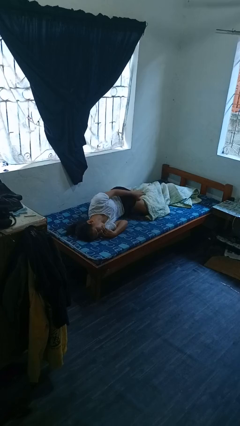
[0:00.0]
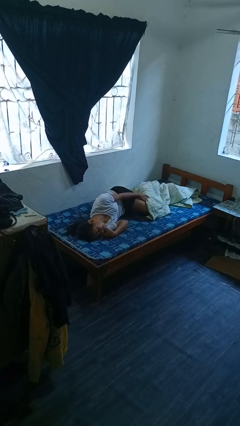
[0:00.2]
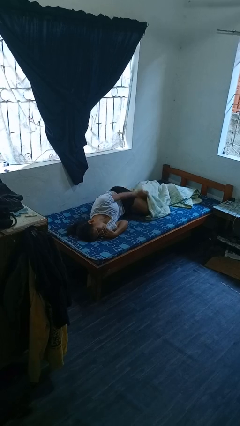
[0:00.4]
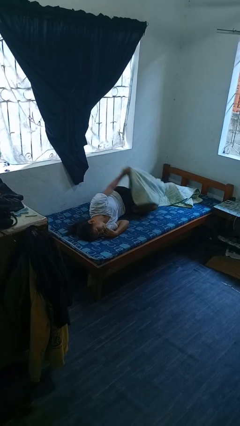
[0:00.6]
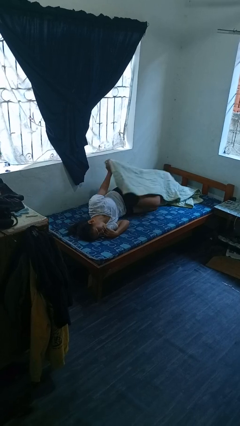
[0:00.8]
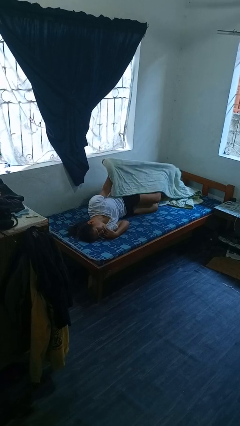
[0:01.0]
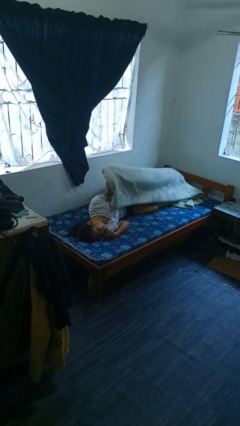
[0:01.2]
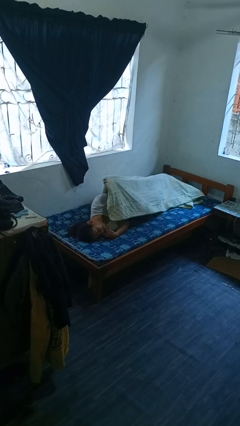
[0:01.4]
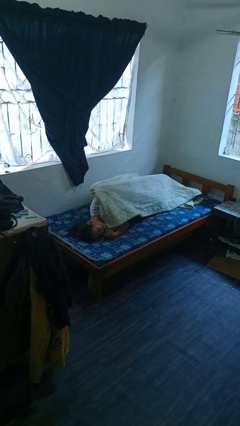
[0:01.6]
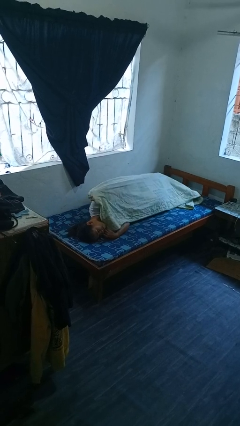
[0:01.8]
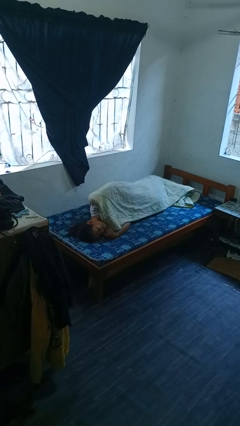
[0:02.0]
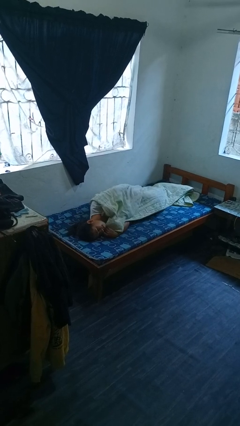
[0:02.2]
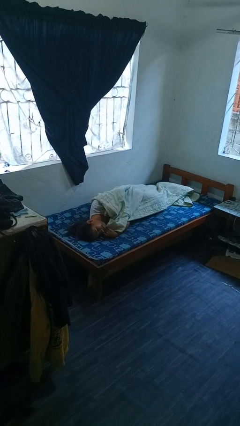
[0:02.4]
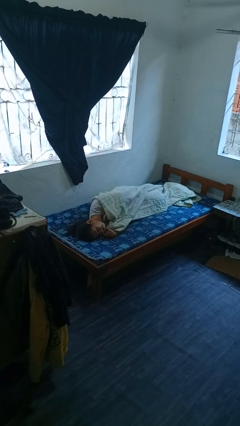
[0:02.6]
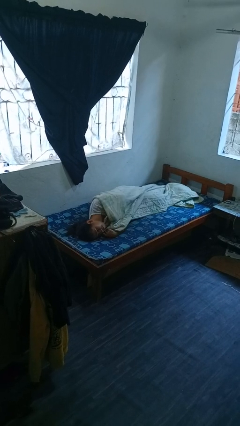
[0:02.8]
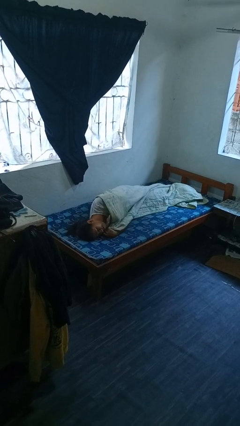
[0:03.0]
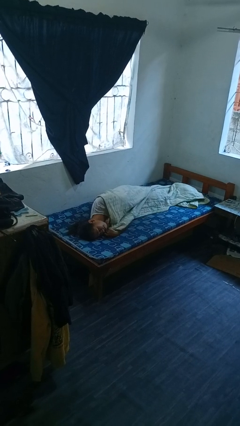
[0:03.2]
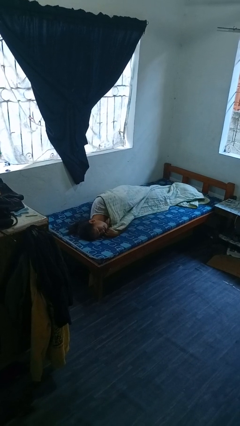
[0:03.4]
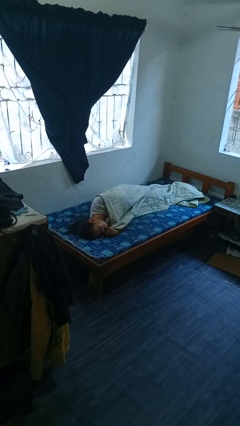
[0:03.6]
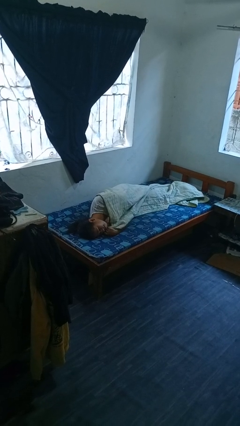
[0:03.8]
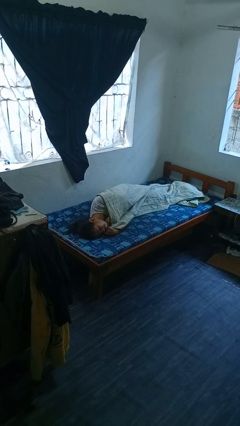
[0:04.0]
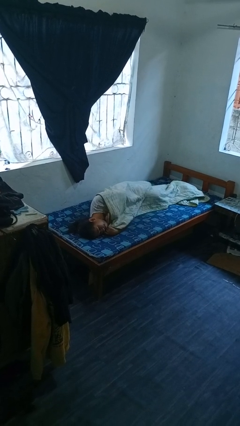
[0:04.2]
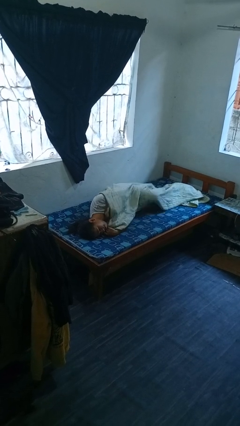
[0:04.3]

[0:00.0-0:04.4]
person covers with bedsheets

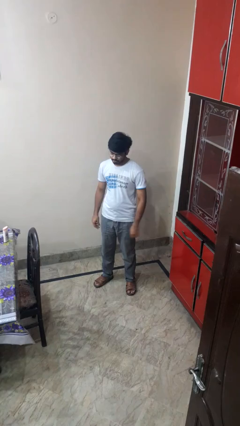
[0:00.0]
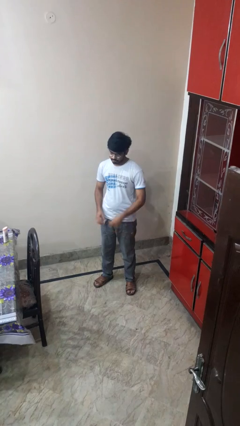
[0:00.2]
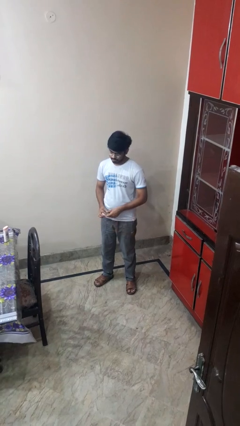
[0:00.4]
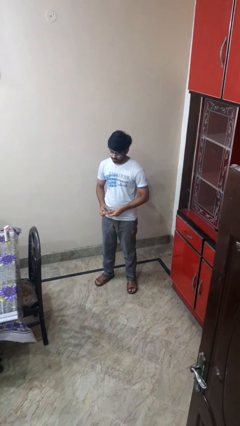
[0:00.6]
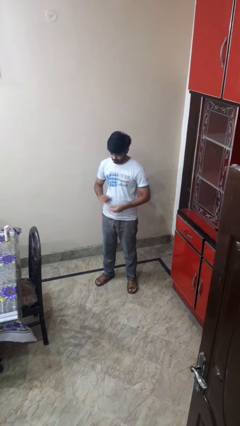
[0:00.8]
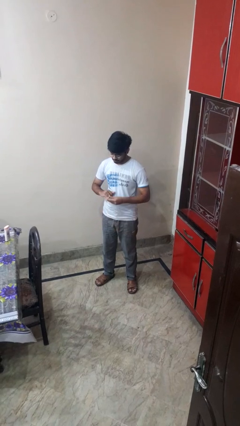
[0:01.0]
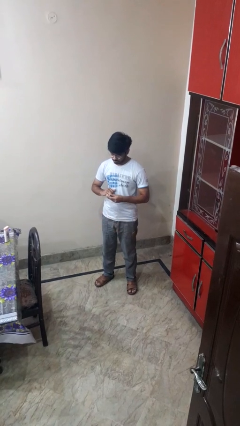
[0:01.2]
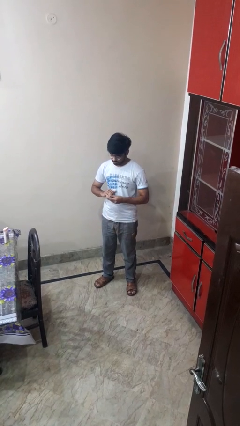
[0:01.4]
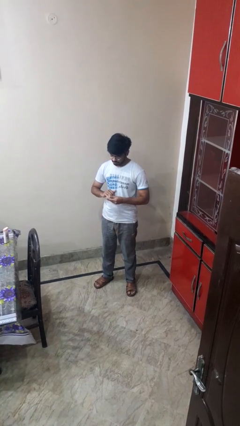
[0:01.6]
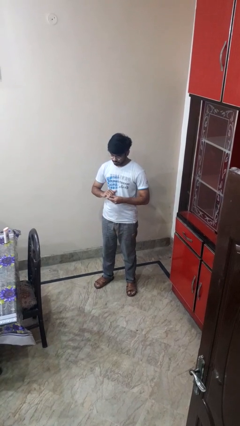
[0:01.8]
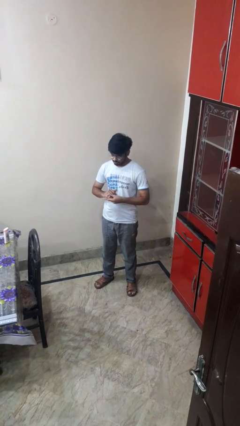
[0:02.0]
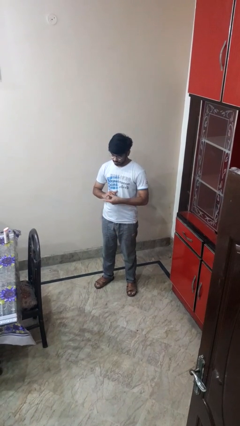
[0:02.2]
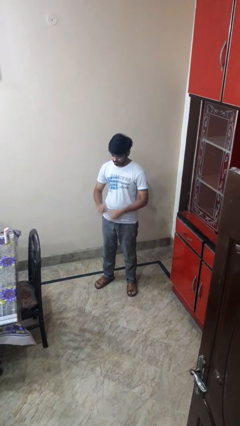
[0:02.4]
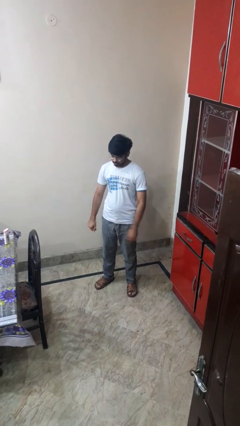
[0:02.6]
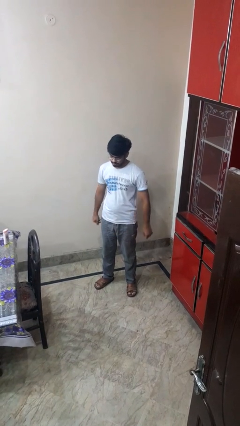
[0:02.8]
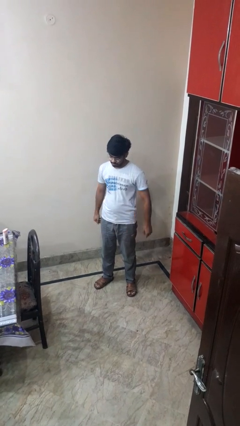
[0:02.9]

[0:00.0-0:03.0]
person puts on ring

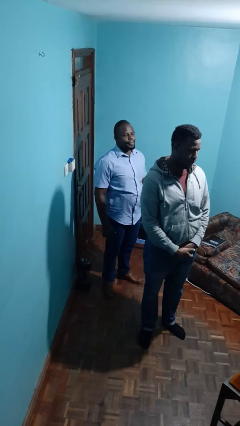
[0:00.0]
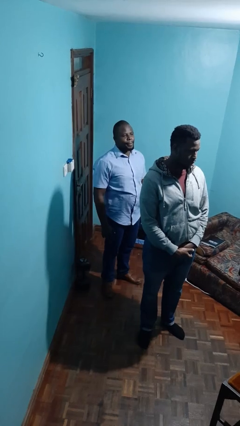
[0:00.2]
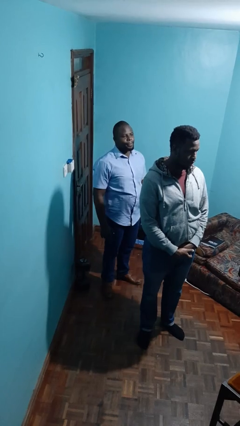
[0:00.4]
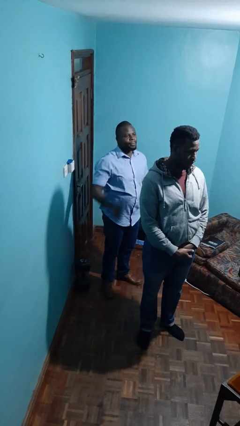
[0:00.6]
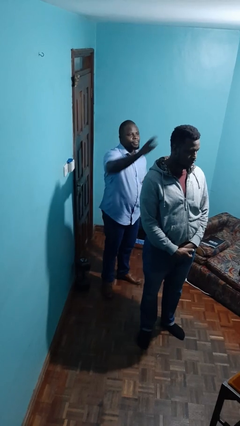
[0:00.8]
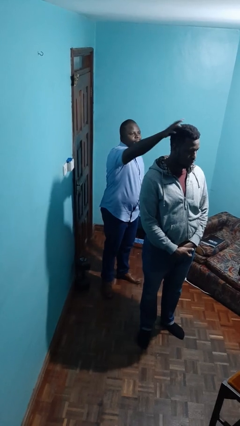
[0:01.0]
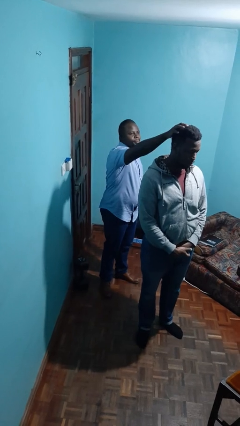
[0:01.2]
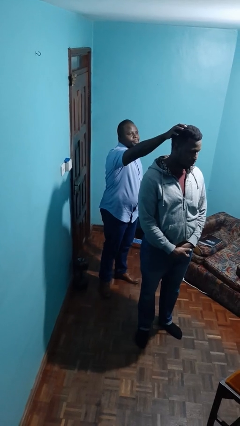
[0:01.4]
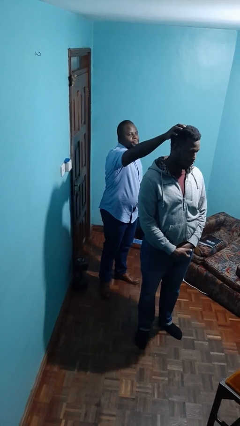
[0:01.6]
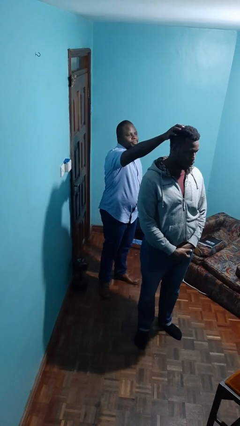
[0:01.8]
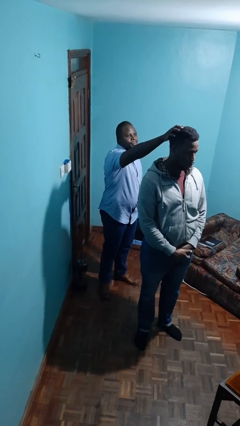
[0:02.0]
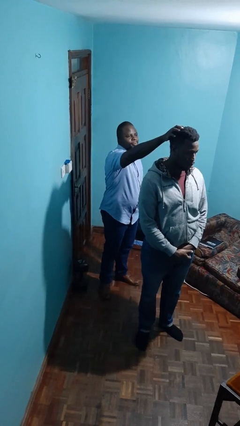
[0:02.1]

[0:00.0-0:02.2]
person grabs person by hair

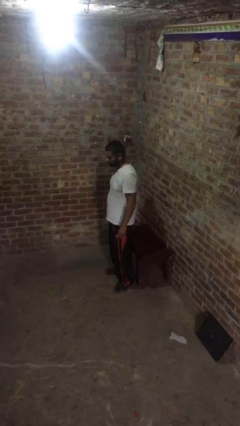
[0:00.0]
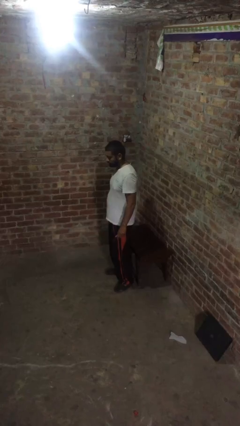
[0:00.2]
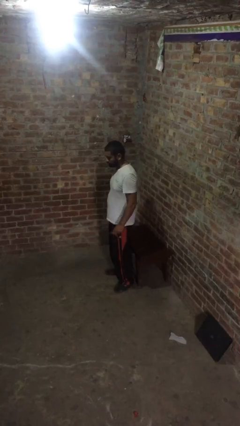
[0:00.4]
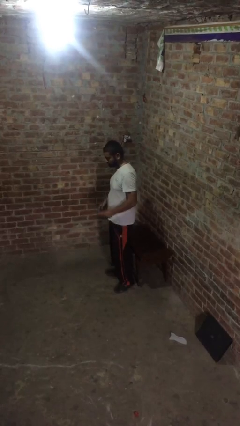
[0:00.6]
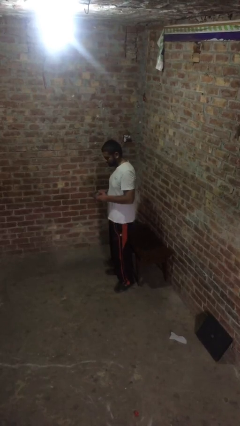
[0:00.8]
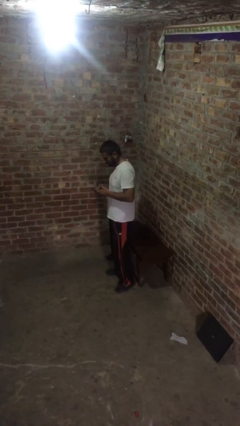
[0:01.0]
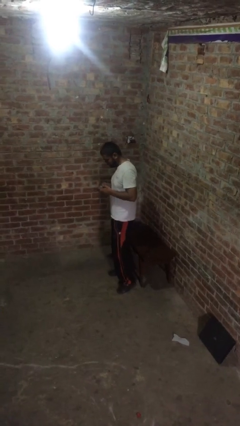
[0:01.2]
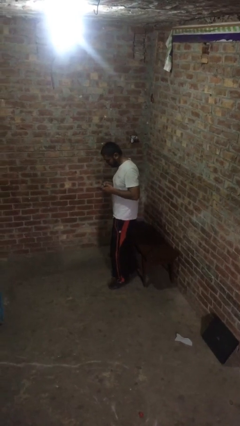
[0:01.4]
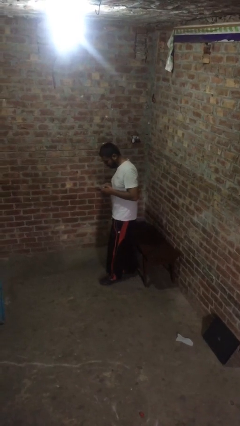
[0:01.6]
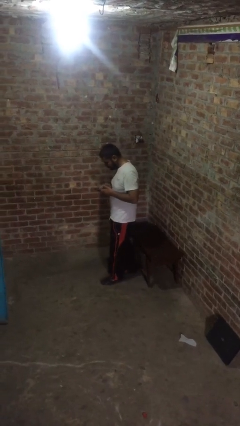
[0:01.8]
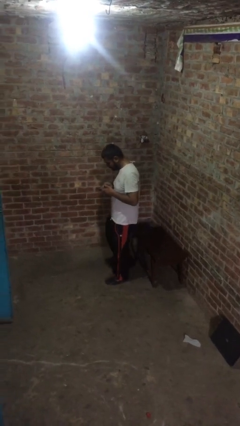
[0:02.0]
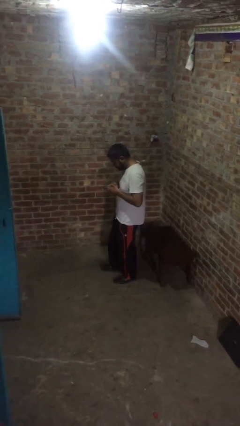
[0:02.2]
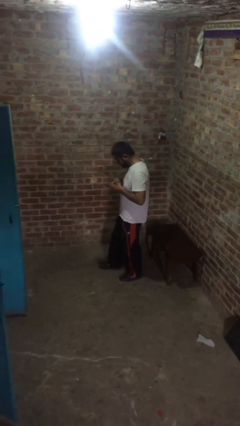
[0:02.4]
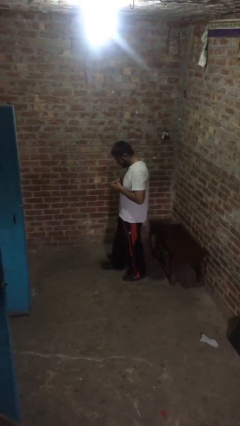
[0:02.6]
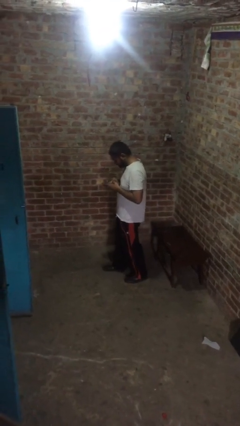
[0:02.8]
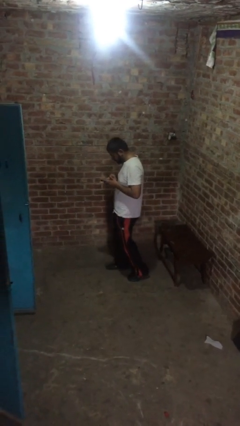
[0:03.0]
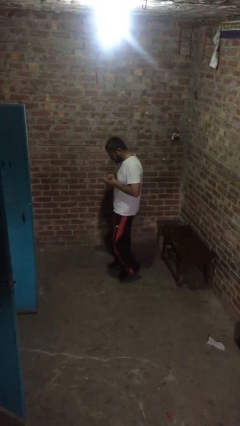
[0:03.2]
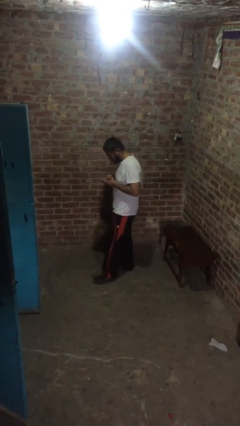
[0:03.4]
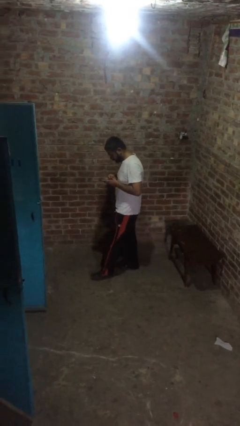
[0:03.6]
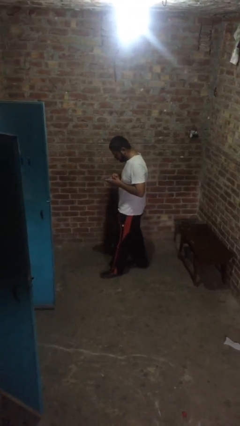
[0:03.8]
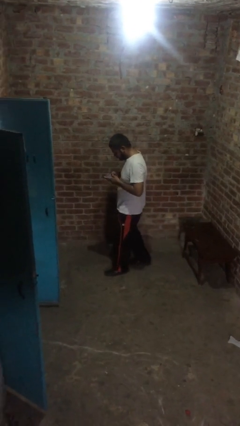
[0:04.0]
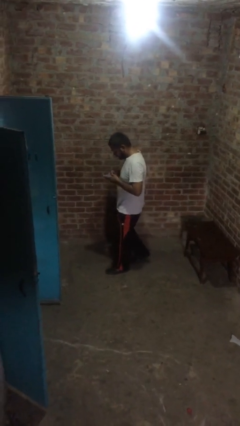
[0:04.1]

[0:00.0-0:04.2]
person texts on phone

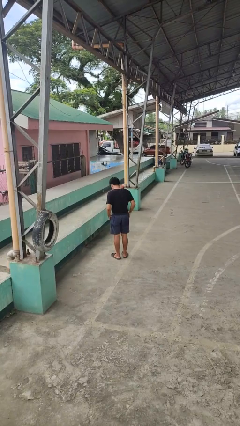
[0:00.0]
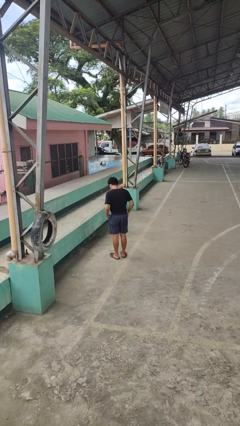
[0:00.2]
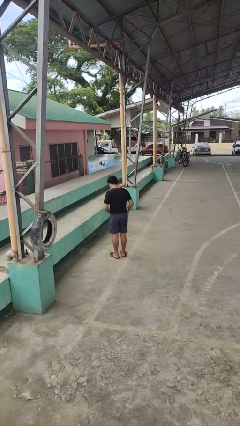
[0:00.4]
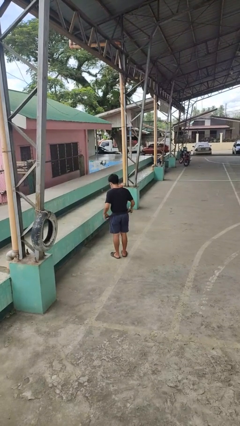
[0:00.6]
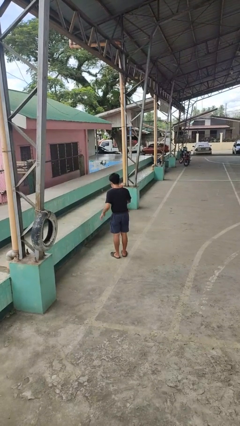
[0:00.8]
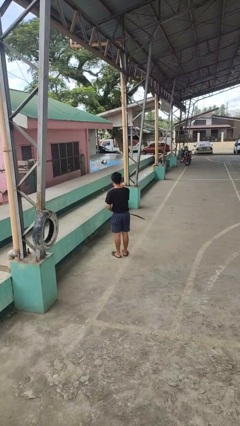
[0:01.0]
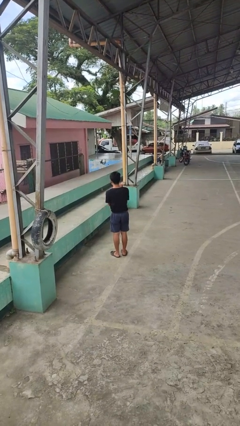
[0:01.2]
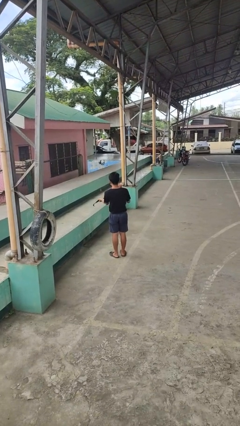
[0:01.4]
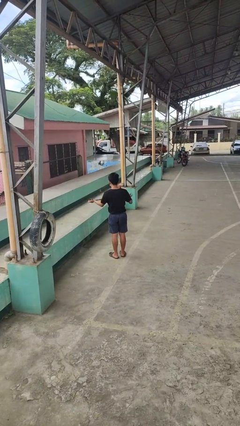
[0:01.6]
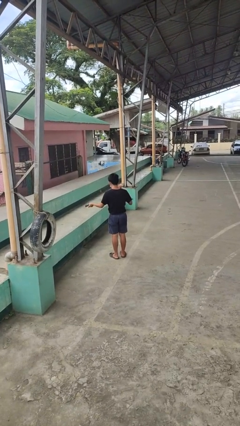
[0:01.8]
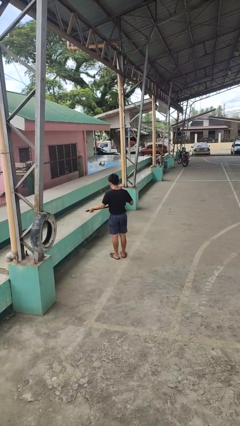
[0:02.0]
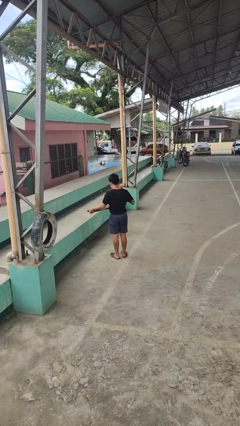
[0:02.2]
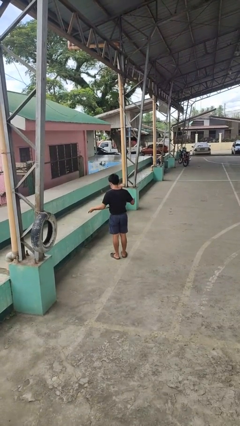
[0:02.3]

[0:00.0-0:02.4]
person takes off belt

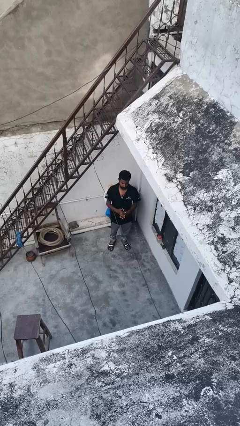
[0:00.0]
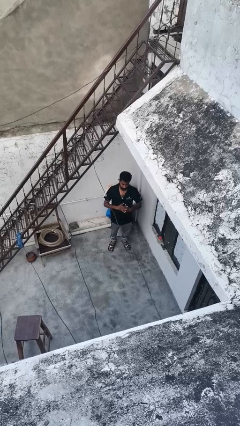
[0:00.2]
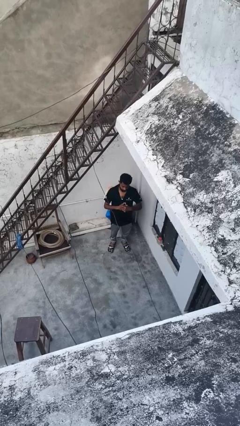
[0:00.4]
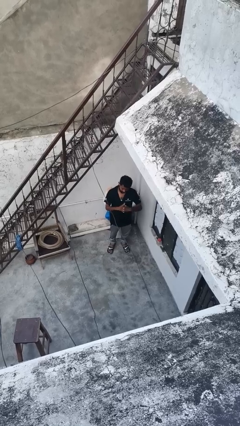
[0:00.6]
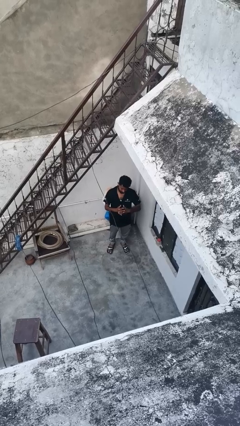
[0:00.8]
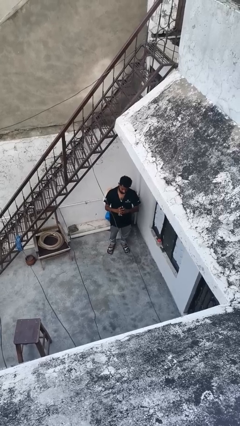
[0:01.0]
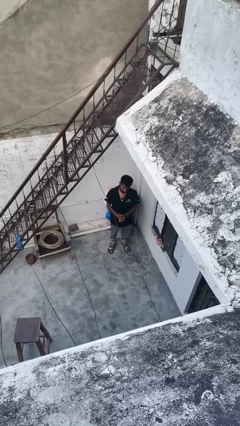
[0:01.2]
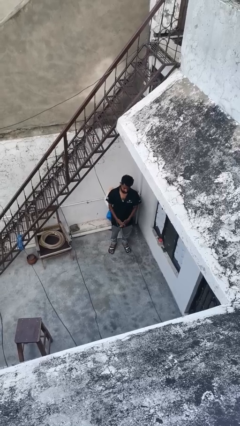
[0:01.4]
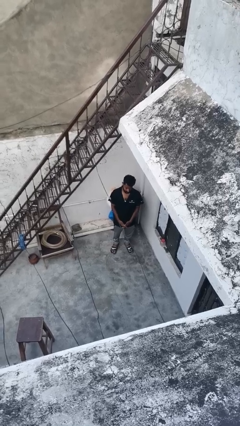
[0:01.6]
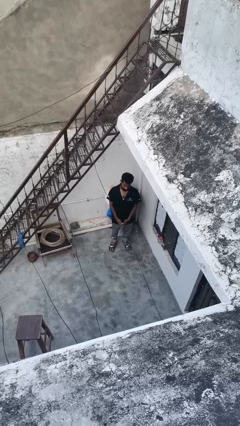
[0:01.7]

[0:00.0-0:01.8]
person cracks knuckles
